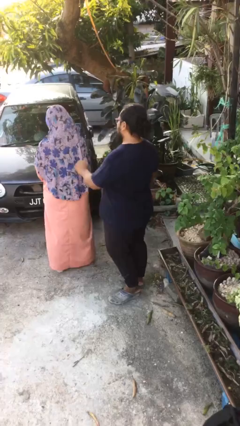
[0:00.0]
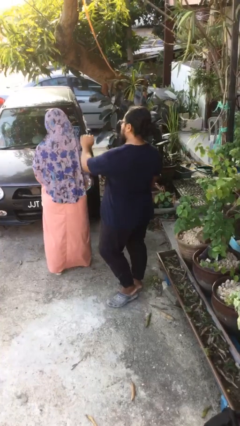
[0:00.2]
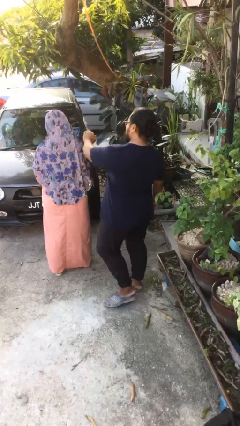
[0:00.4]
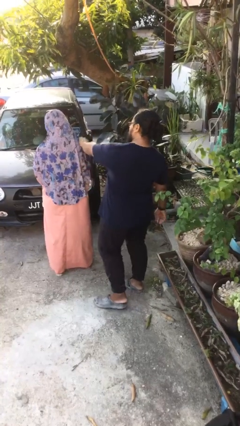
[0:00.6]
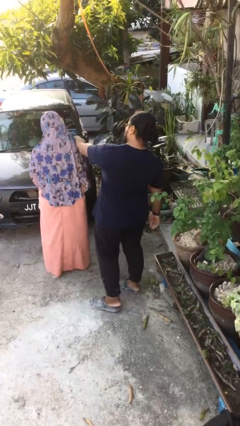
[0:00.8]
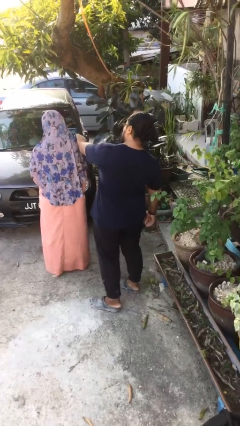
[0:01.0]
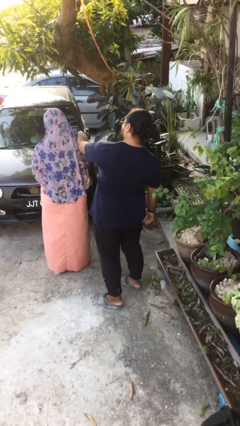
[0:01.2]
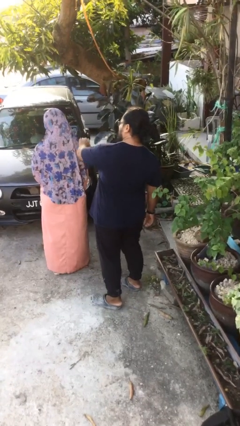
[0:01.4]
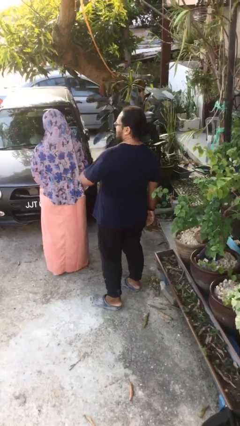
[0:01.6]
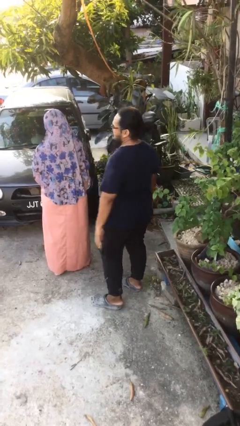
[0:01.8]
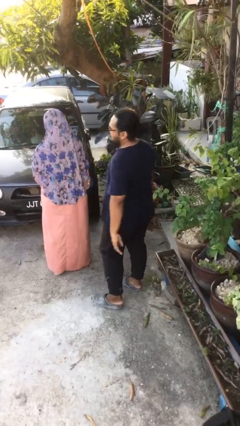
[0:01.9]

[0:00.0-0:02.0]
person touches back of person

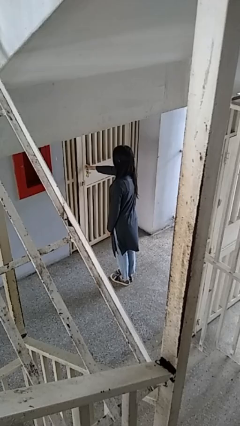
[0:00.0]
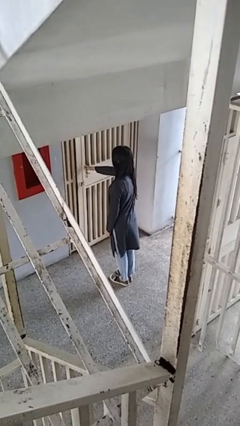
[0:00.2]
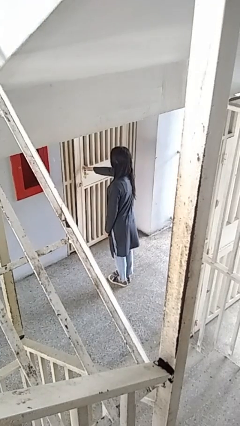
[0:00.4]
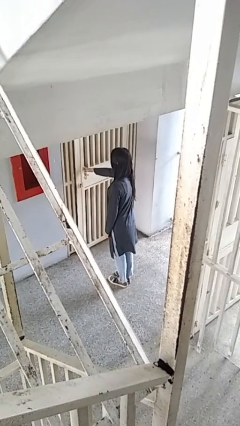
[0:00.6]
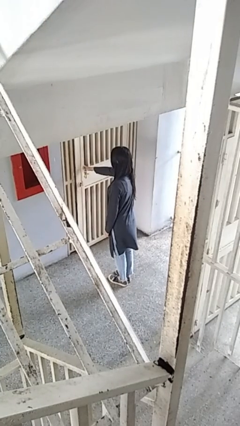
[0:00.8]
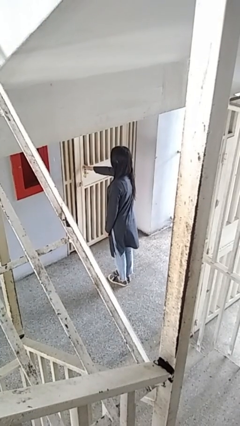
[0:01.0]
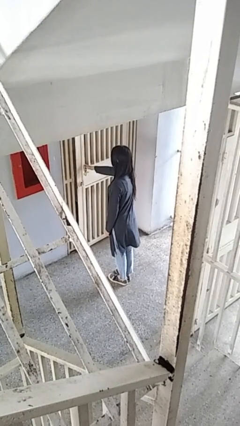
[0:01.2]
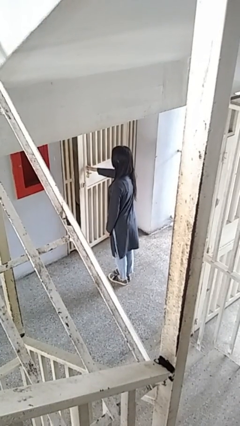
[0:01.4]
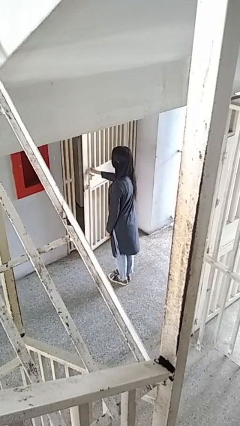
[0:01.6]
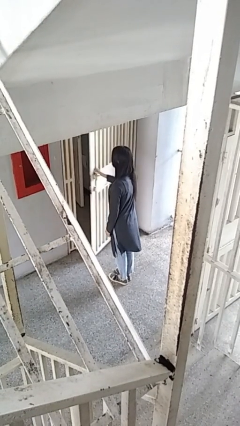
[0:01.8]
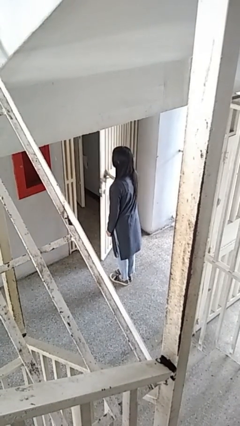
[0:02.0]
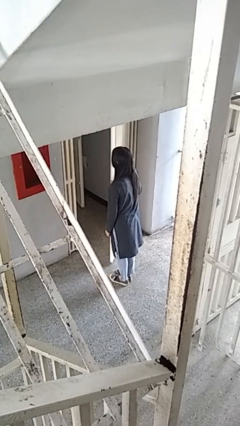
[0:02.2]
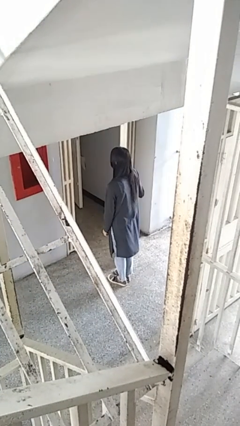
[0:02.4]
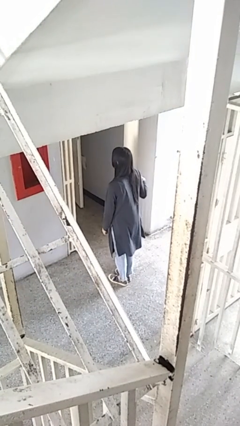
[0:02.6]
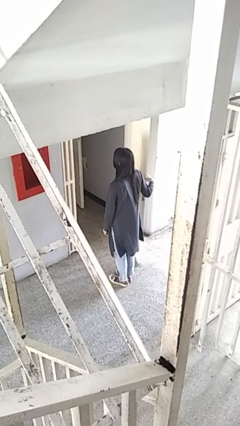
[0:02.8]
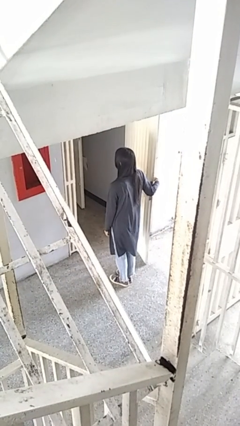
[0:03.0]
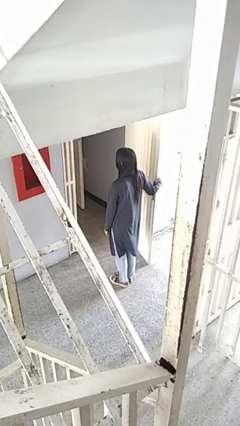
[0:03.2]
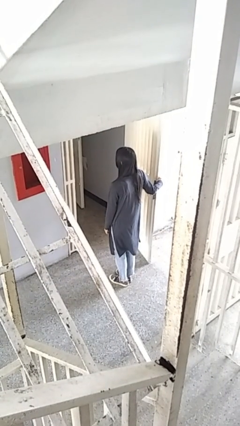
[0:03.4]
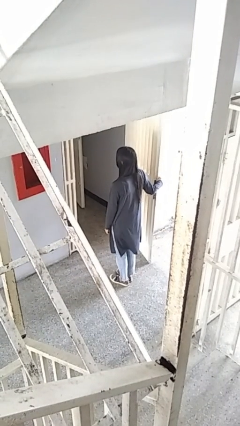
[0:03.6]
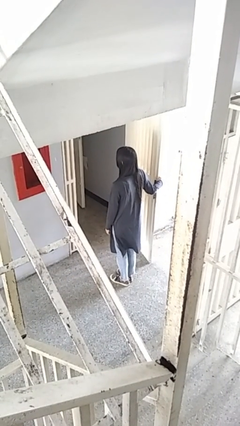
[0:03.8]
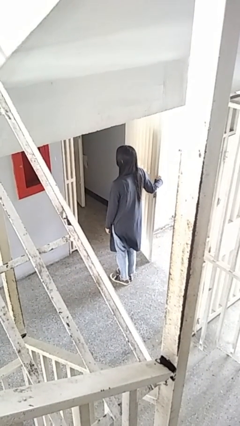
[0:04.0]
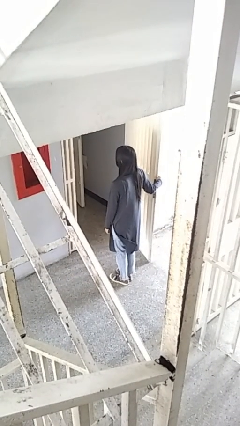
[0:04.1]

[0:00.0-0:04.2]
person opens gate

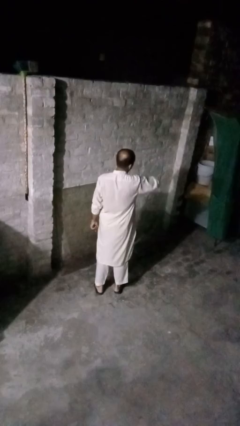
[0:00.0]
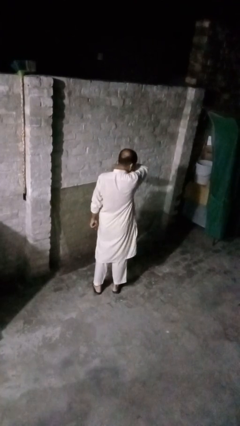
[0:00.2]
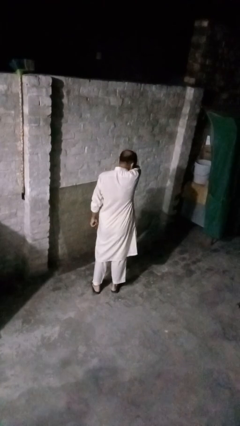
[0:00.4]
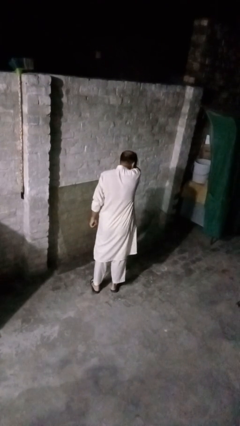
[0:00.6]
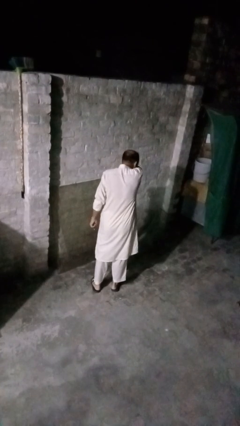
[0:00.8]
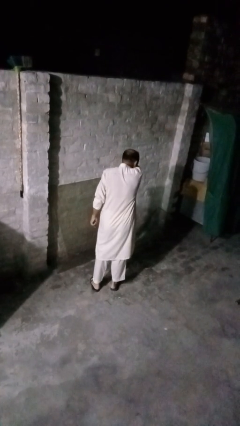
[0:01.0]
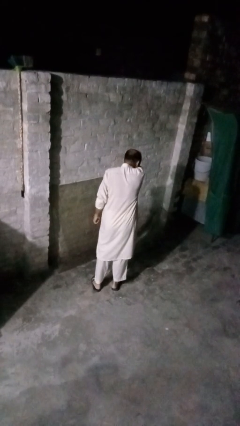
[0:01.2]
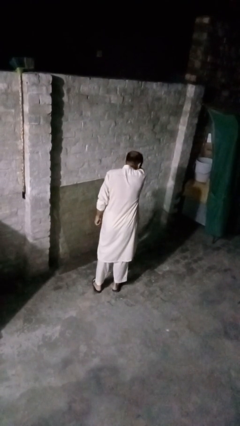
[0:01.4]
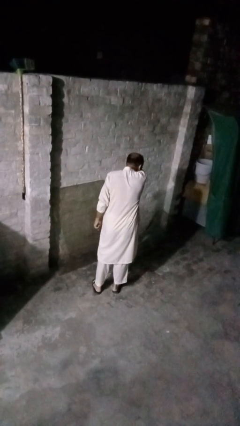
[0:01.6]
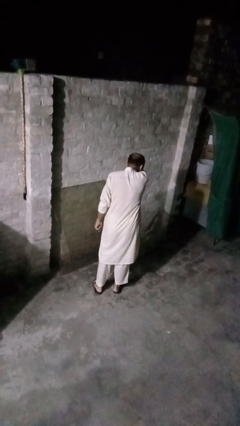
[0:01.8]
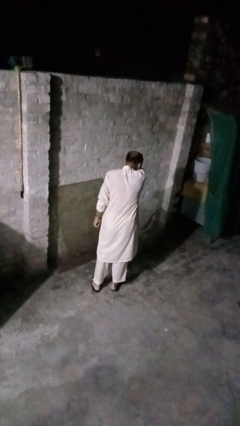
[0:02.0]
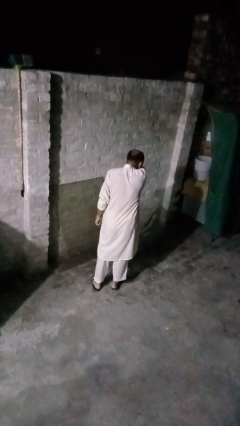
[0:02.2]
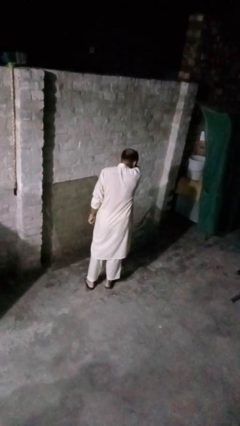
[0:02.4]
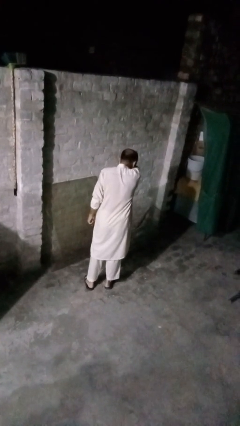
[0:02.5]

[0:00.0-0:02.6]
person sneezes into arm

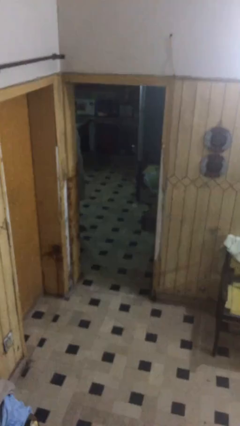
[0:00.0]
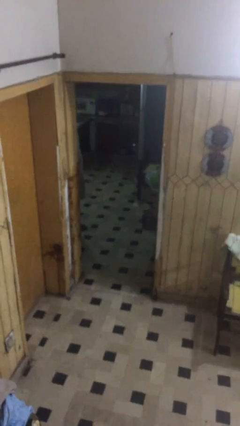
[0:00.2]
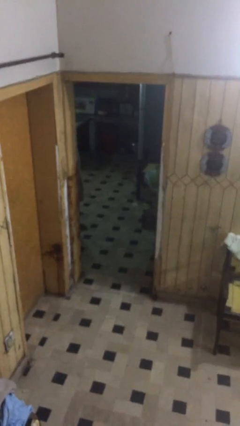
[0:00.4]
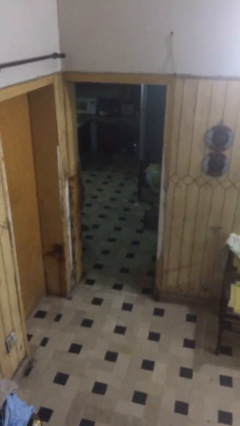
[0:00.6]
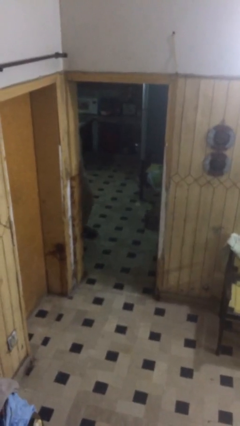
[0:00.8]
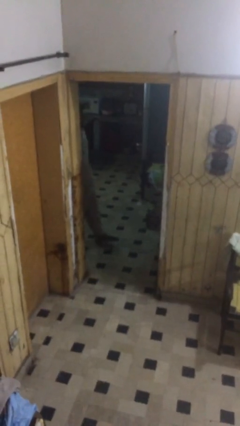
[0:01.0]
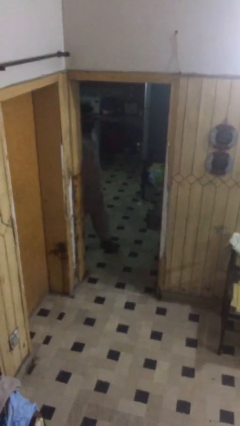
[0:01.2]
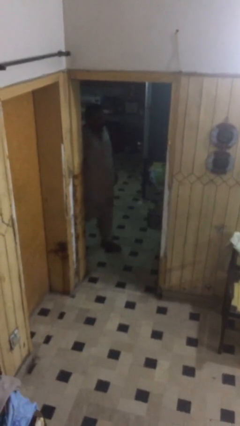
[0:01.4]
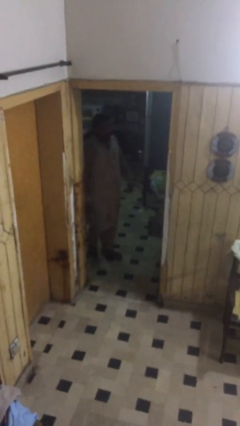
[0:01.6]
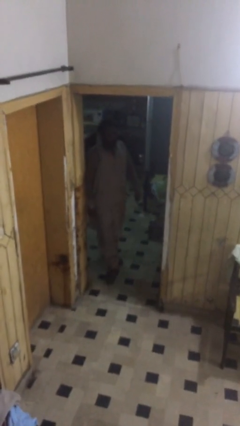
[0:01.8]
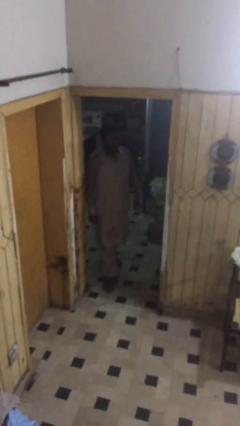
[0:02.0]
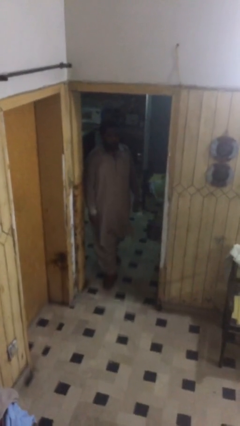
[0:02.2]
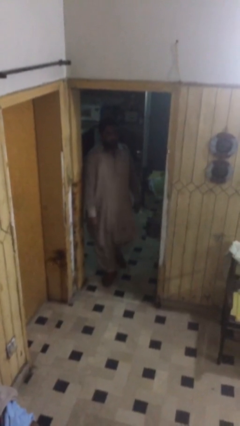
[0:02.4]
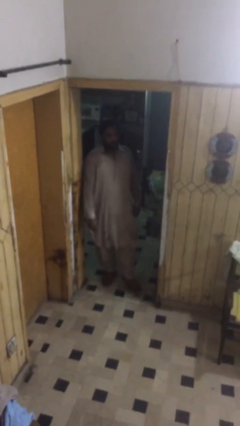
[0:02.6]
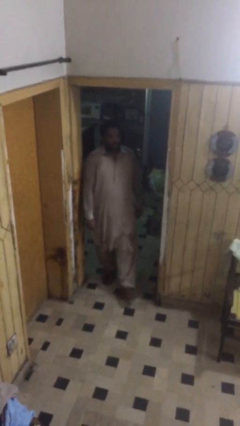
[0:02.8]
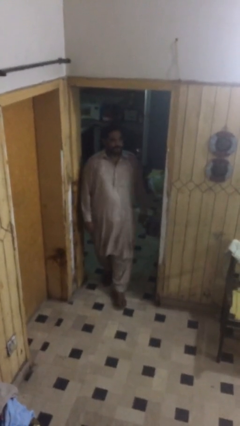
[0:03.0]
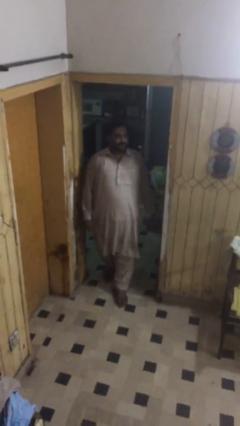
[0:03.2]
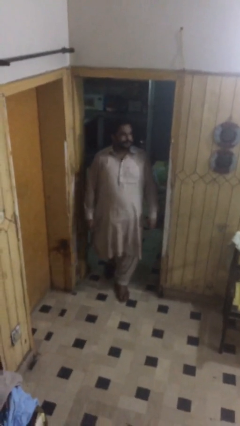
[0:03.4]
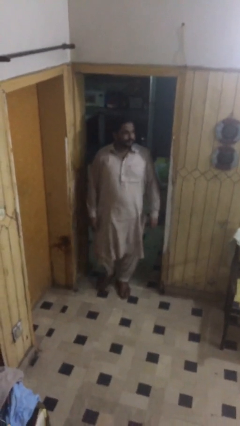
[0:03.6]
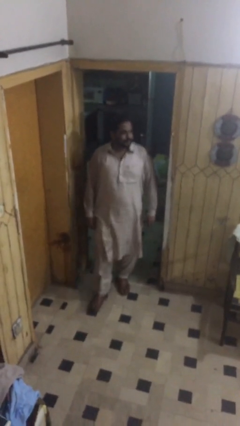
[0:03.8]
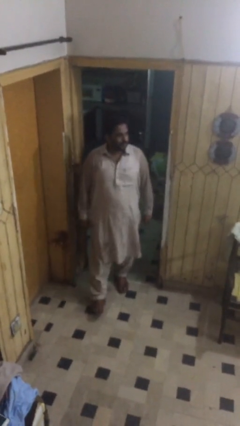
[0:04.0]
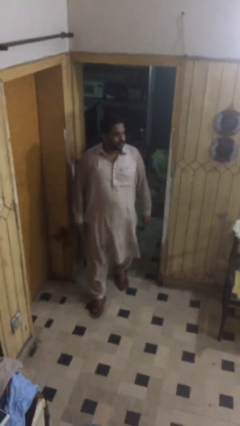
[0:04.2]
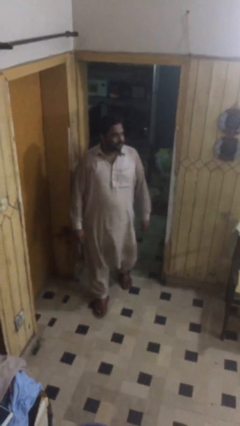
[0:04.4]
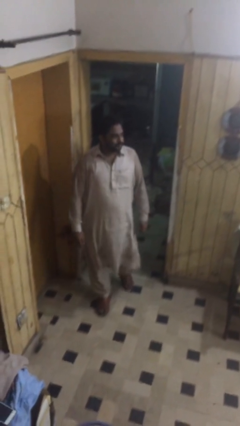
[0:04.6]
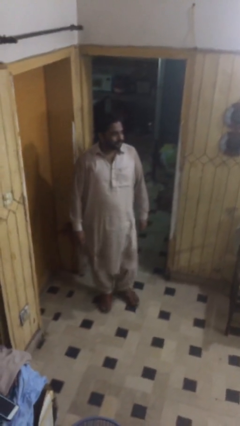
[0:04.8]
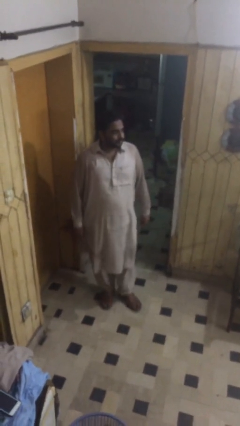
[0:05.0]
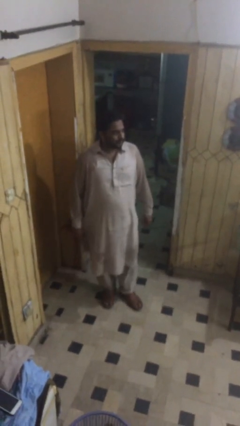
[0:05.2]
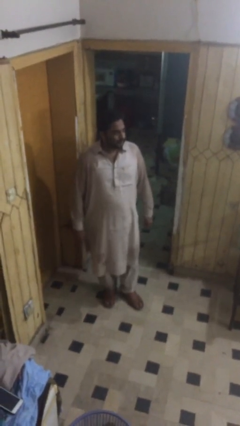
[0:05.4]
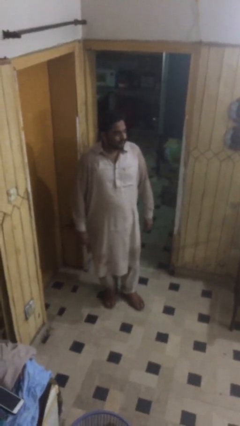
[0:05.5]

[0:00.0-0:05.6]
person enters scene through structure

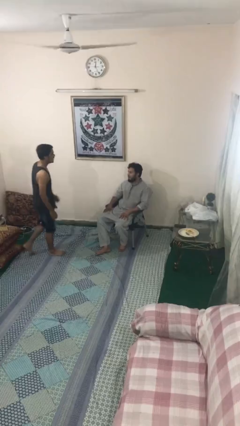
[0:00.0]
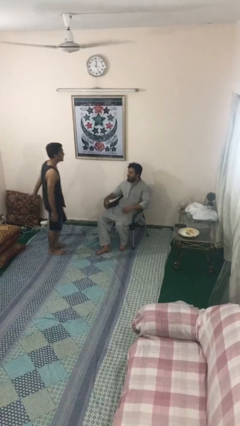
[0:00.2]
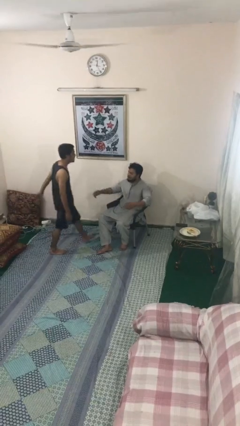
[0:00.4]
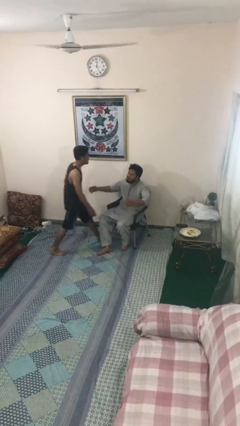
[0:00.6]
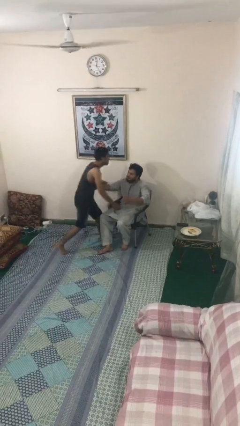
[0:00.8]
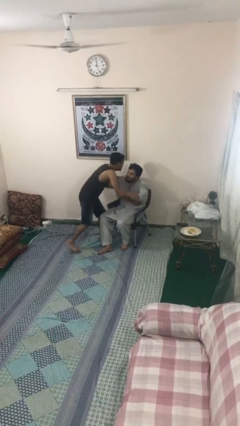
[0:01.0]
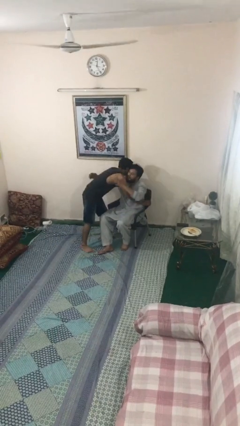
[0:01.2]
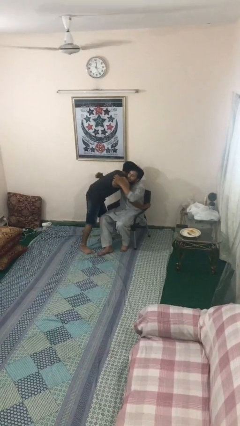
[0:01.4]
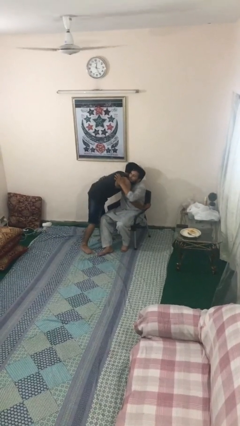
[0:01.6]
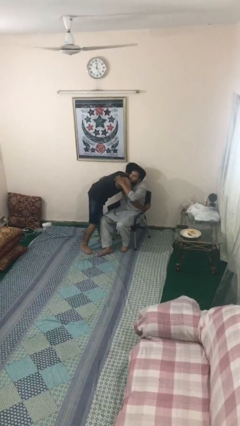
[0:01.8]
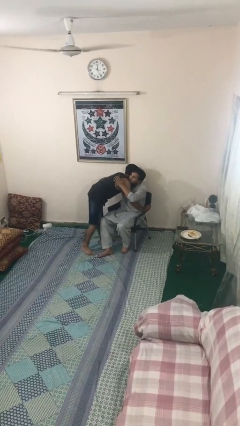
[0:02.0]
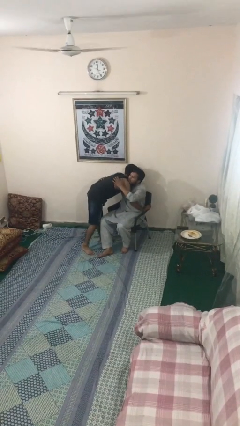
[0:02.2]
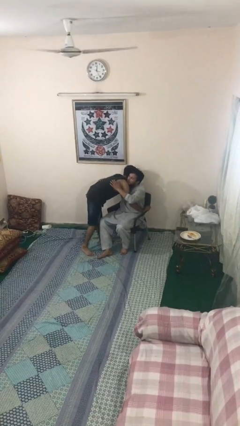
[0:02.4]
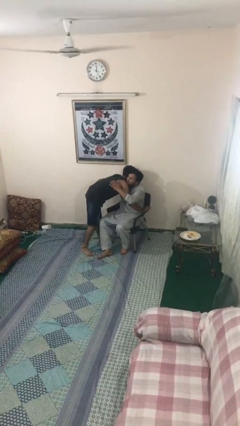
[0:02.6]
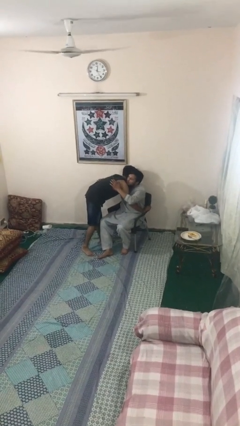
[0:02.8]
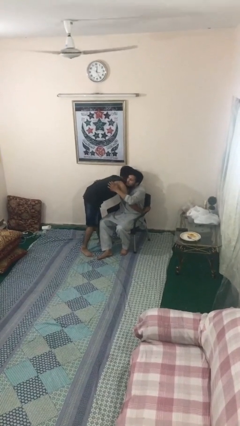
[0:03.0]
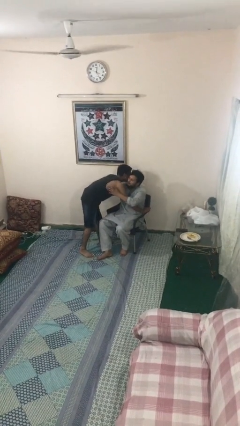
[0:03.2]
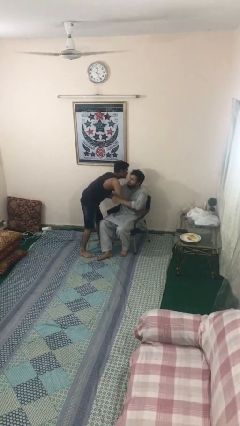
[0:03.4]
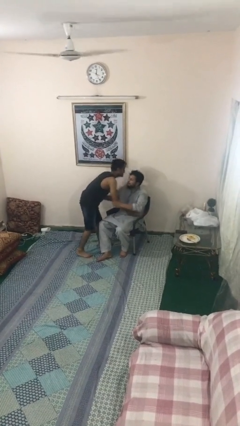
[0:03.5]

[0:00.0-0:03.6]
person embraces person
